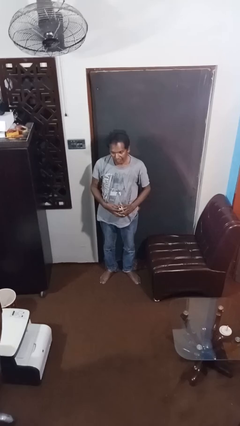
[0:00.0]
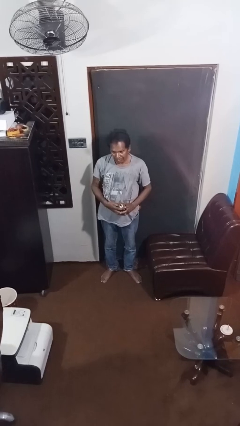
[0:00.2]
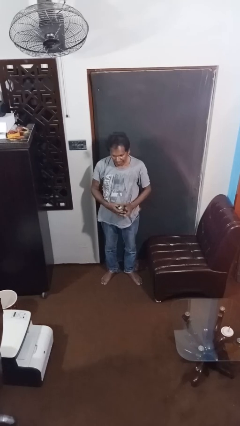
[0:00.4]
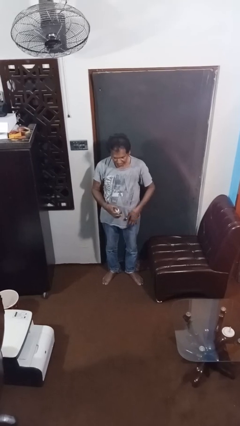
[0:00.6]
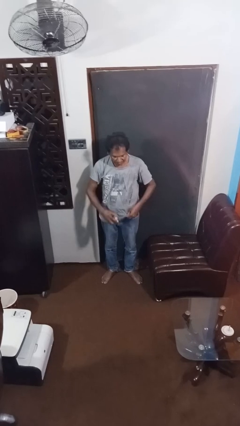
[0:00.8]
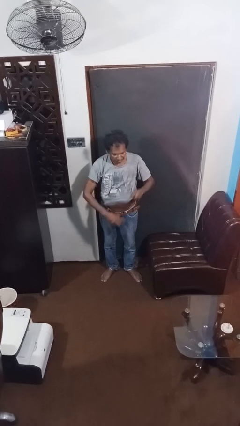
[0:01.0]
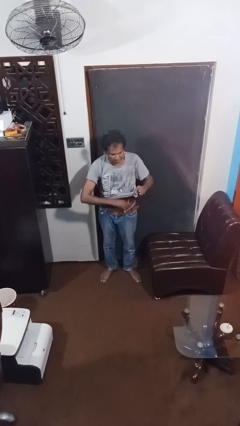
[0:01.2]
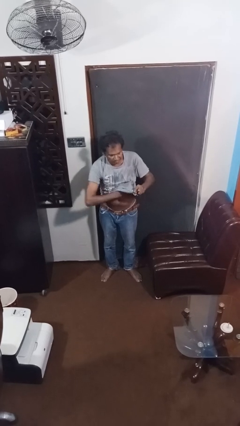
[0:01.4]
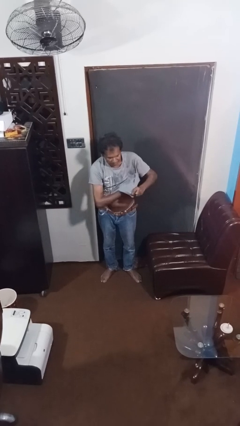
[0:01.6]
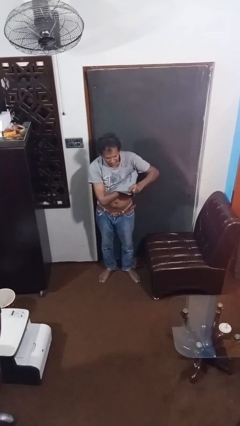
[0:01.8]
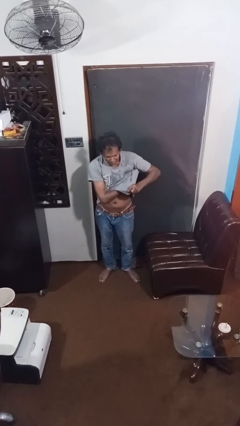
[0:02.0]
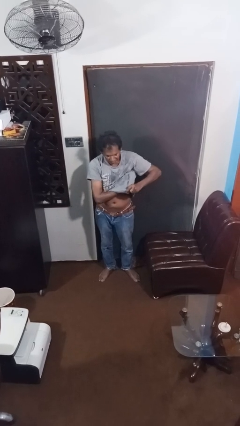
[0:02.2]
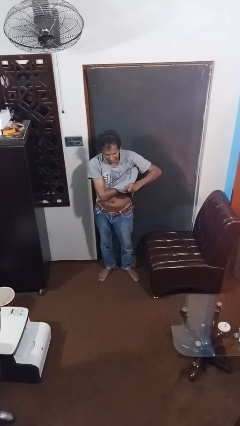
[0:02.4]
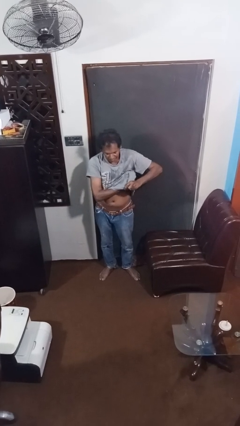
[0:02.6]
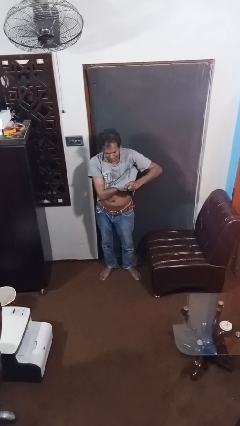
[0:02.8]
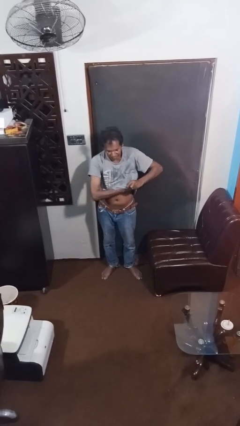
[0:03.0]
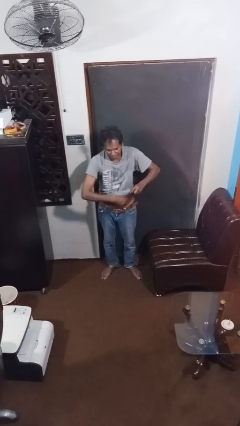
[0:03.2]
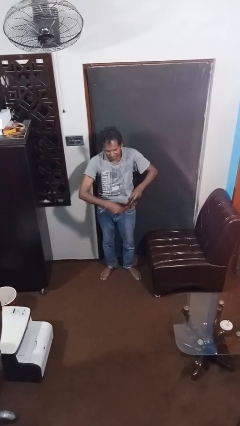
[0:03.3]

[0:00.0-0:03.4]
person applies deodorant

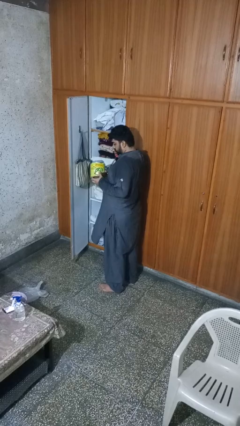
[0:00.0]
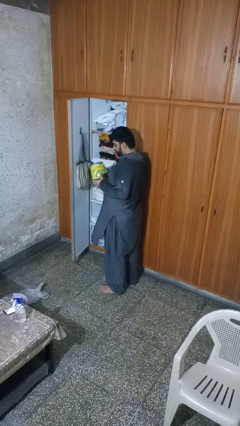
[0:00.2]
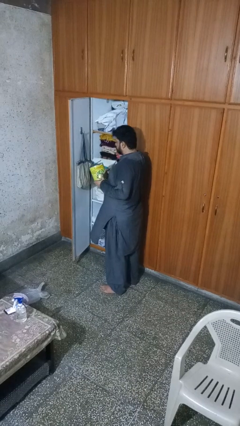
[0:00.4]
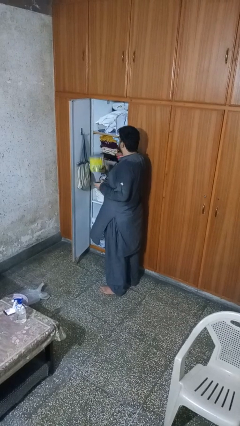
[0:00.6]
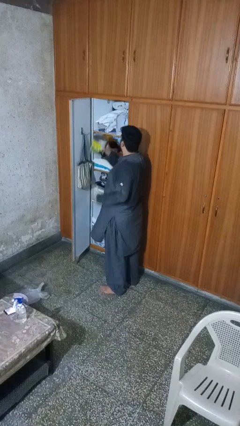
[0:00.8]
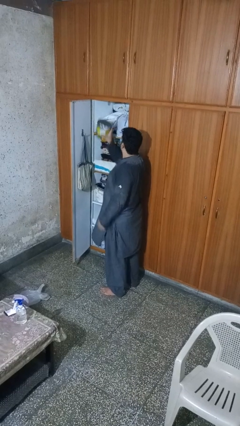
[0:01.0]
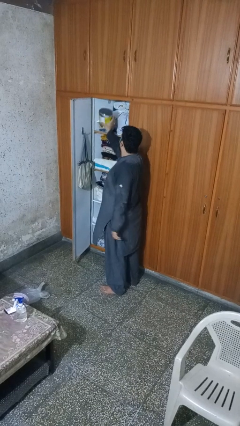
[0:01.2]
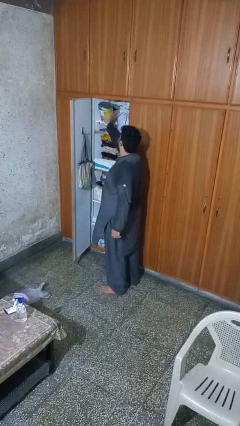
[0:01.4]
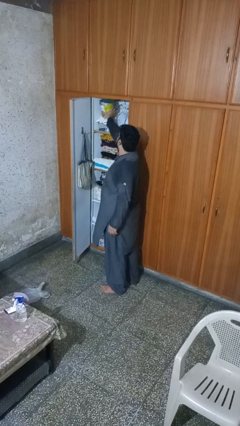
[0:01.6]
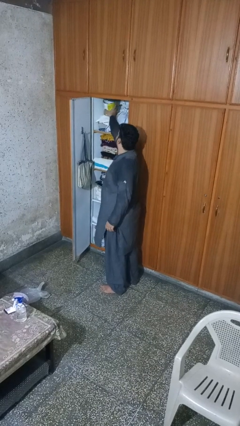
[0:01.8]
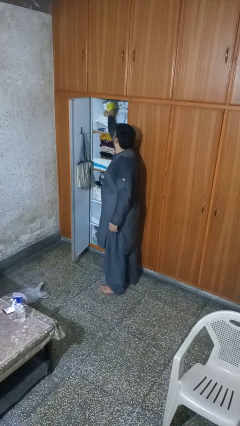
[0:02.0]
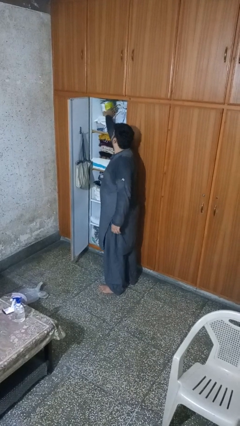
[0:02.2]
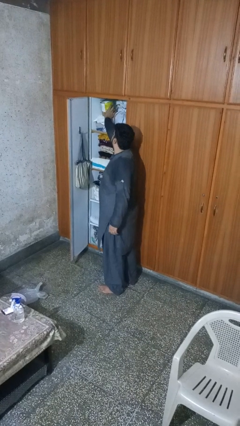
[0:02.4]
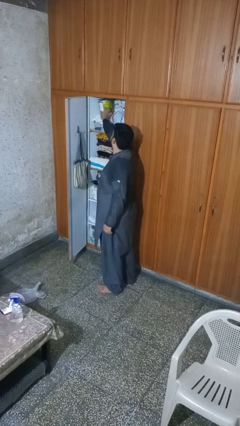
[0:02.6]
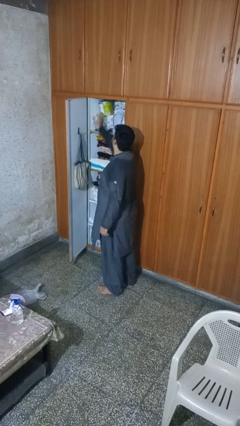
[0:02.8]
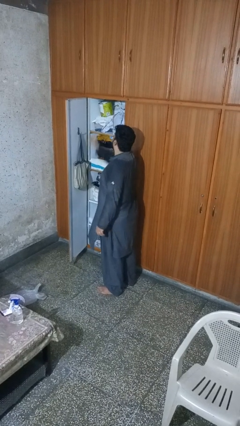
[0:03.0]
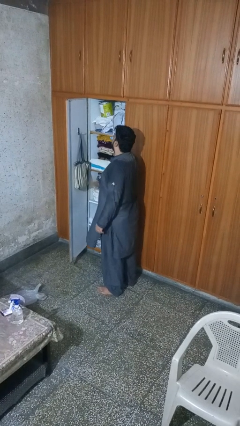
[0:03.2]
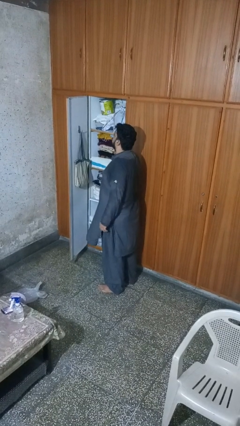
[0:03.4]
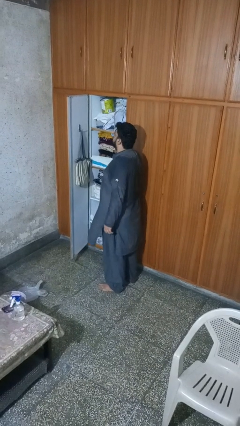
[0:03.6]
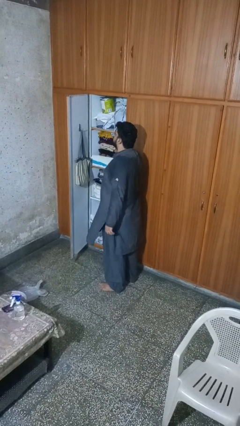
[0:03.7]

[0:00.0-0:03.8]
person puts down object on shelf

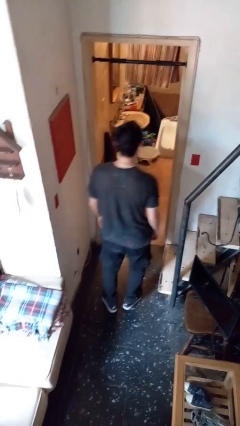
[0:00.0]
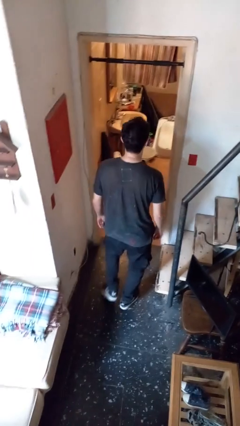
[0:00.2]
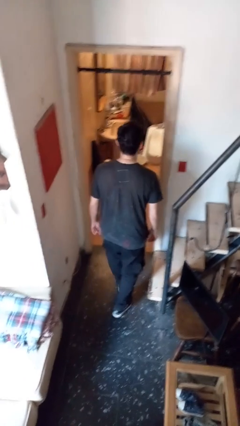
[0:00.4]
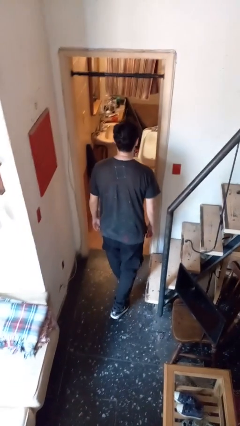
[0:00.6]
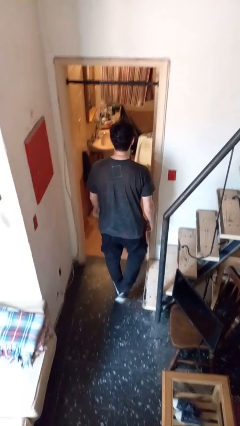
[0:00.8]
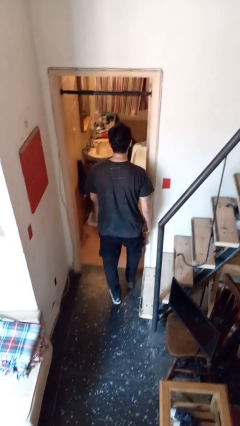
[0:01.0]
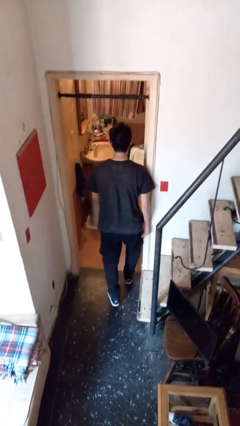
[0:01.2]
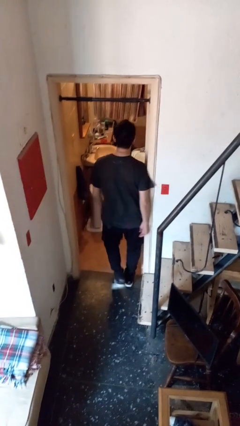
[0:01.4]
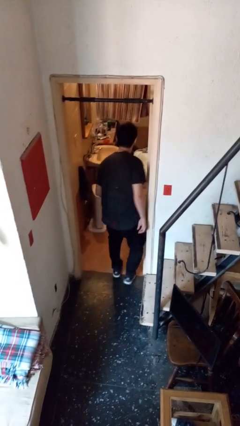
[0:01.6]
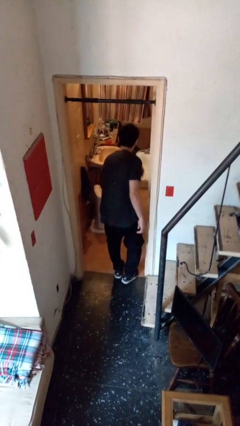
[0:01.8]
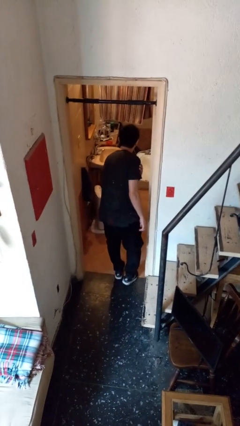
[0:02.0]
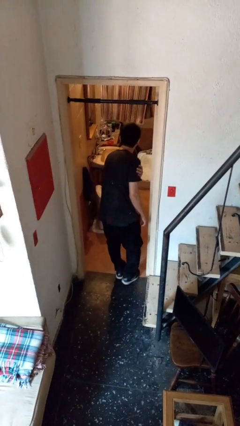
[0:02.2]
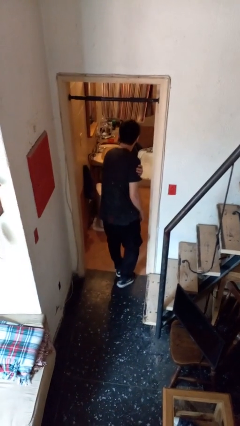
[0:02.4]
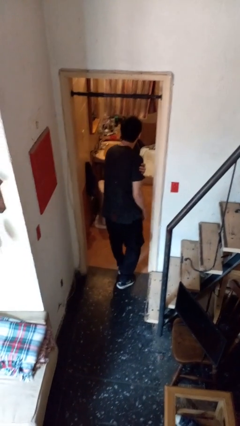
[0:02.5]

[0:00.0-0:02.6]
person bumps into wall

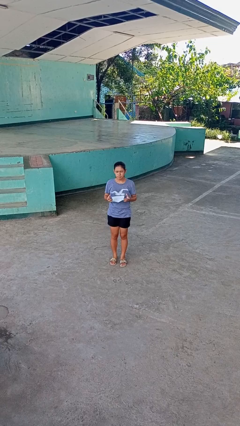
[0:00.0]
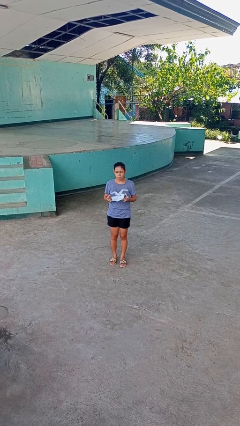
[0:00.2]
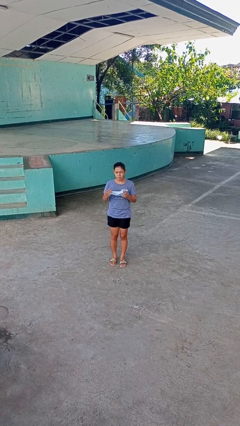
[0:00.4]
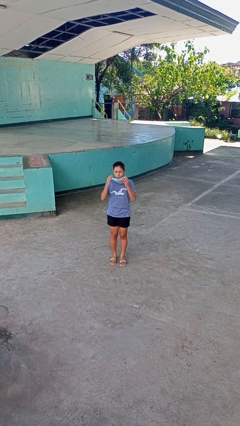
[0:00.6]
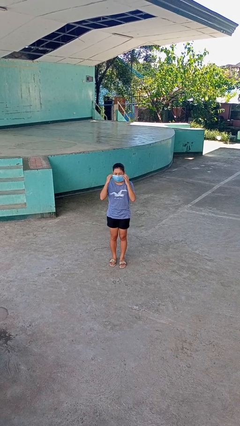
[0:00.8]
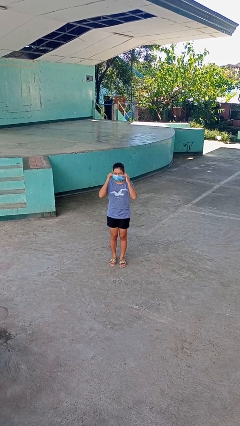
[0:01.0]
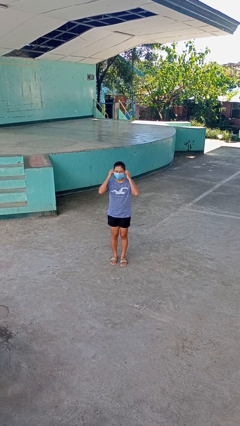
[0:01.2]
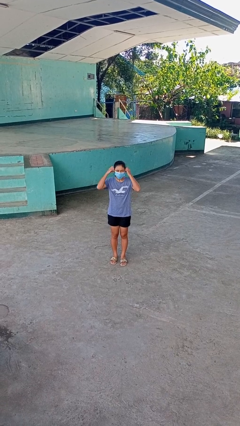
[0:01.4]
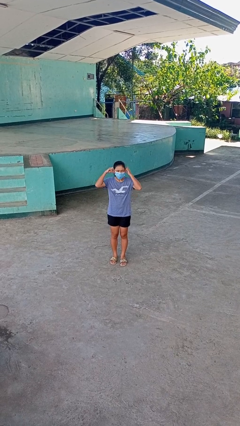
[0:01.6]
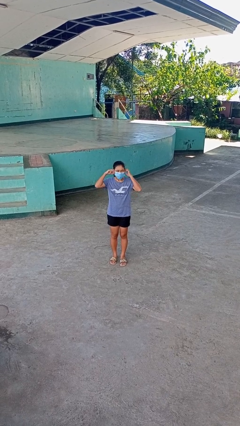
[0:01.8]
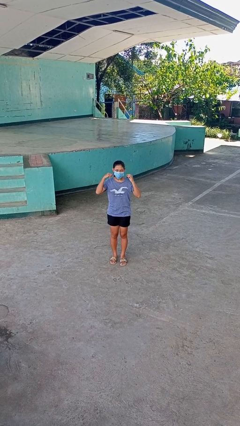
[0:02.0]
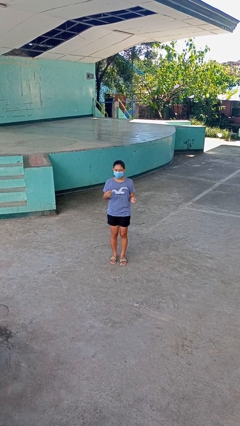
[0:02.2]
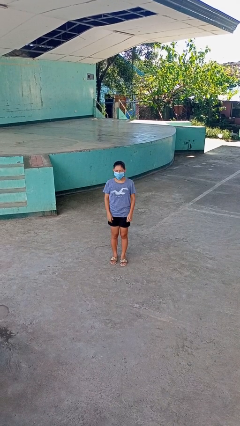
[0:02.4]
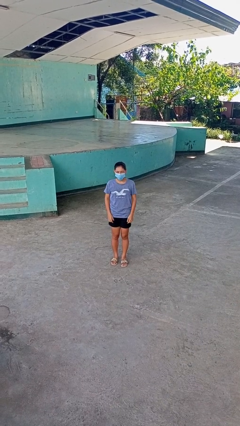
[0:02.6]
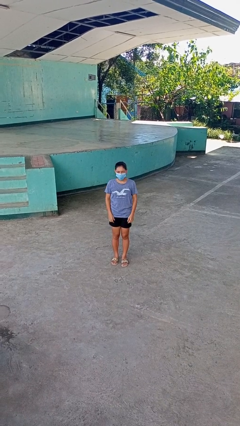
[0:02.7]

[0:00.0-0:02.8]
person puts on facemask

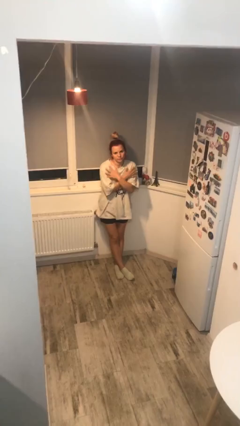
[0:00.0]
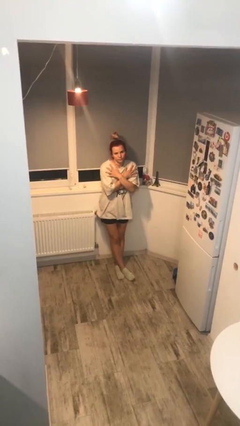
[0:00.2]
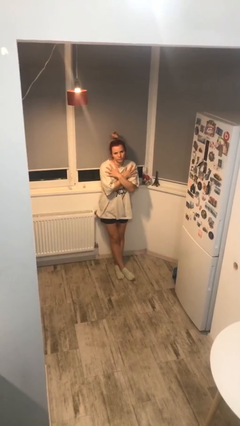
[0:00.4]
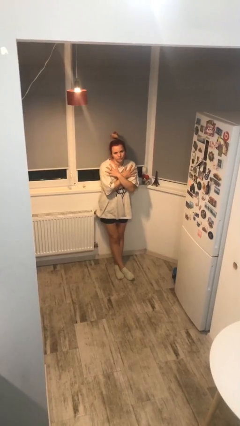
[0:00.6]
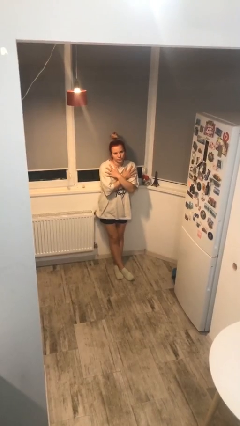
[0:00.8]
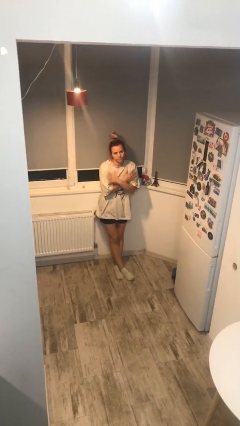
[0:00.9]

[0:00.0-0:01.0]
person crosses arms

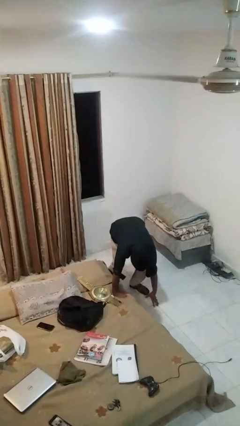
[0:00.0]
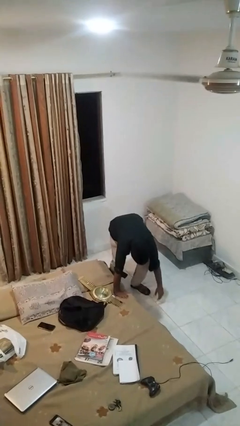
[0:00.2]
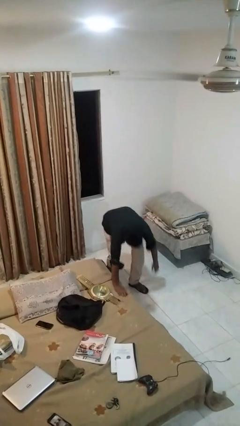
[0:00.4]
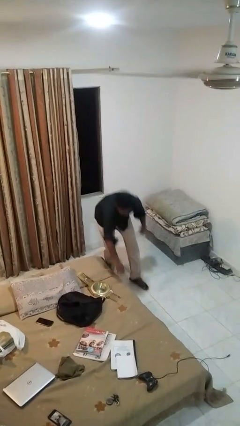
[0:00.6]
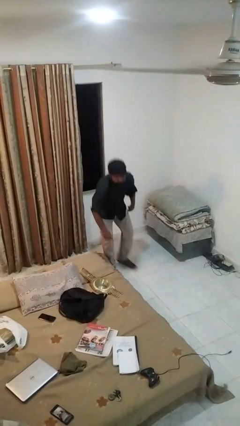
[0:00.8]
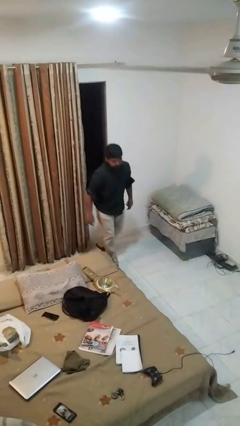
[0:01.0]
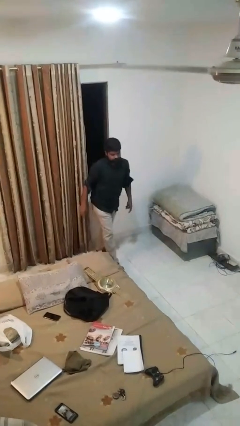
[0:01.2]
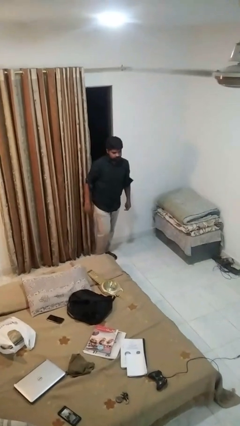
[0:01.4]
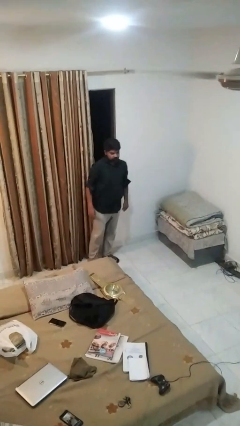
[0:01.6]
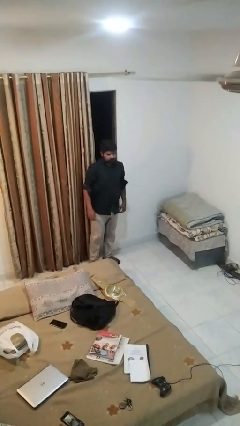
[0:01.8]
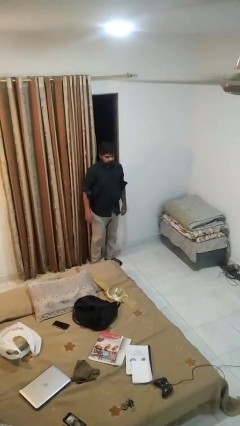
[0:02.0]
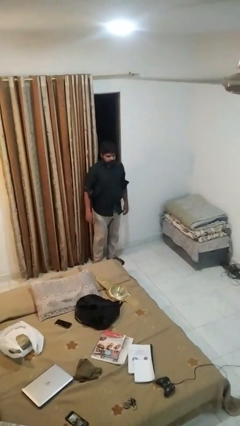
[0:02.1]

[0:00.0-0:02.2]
person stands up from floor

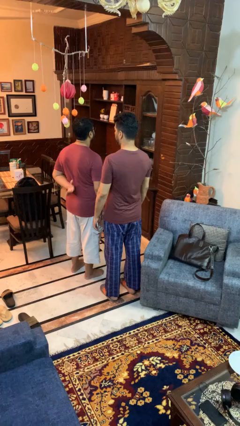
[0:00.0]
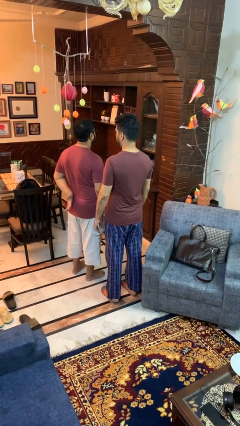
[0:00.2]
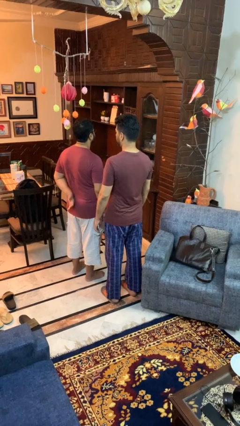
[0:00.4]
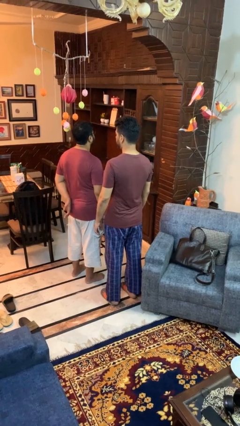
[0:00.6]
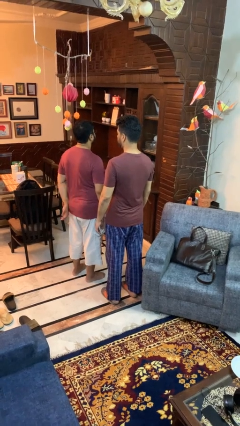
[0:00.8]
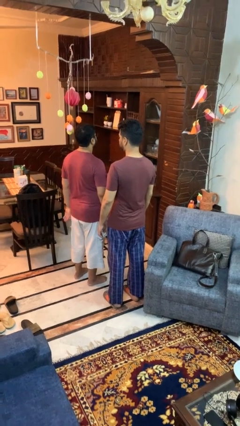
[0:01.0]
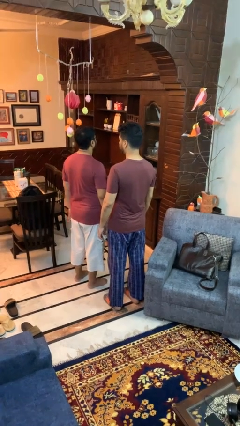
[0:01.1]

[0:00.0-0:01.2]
person grabs person by bicep
